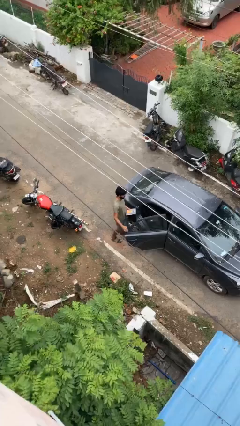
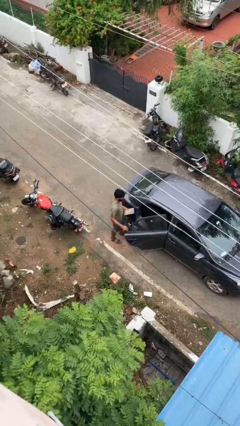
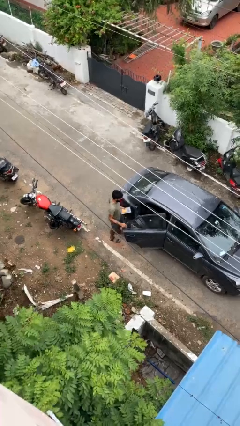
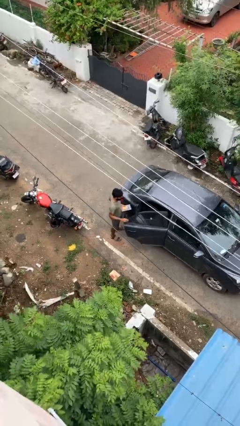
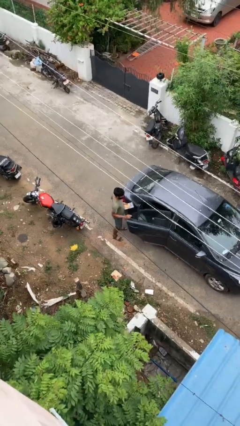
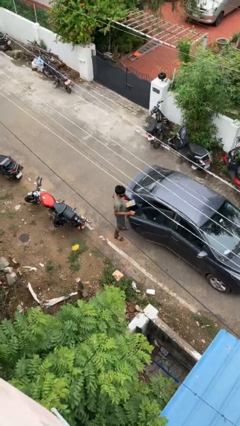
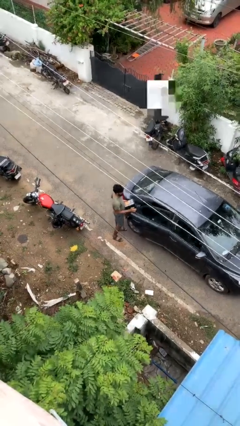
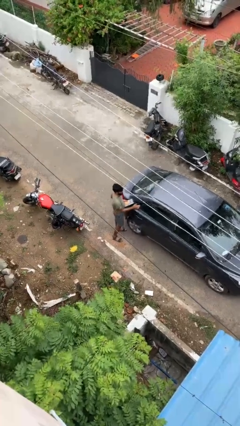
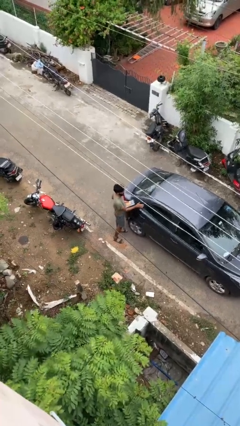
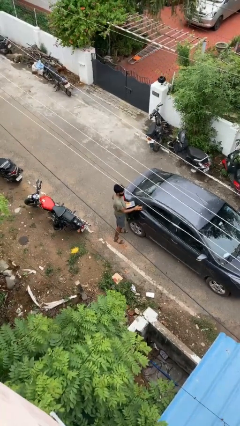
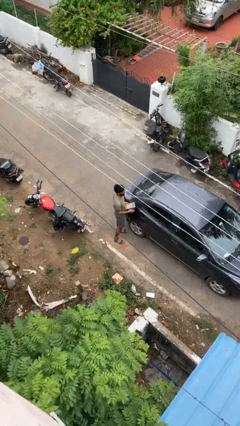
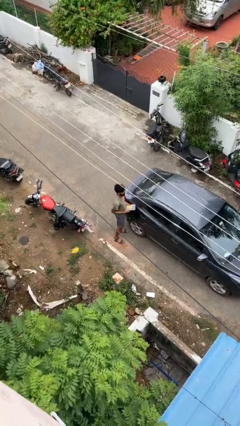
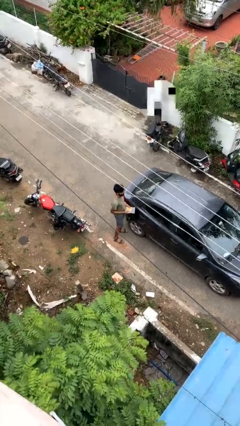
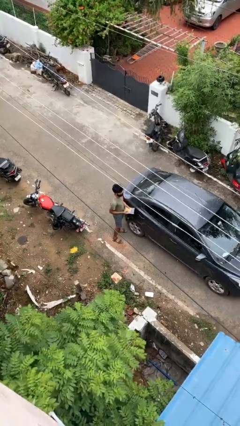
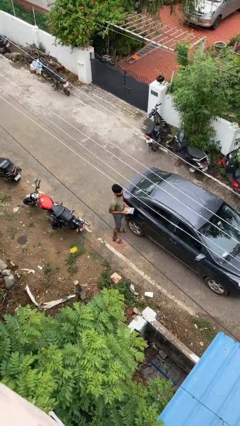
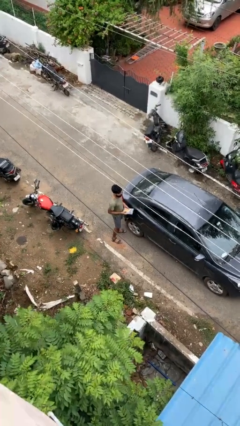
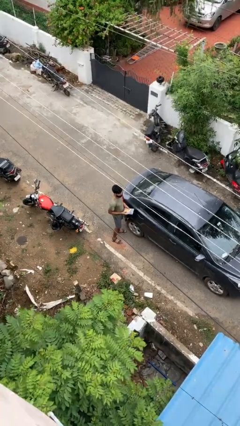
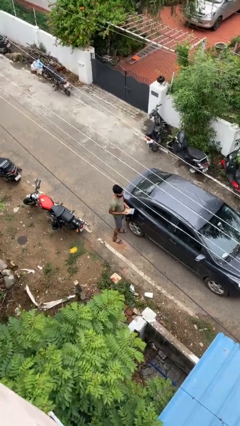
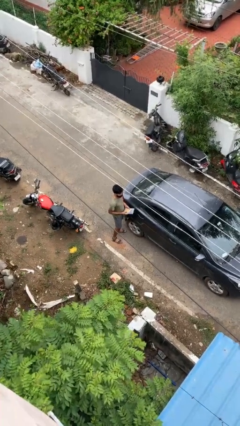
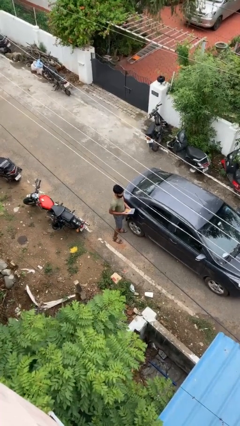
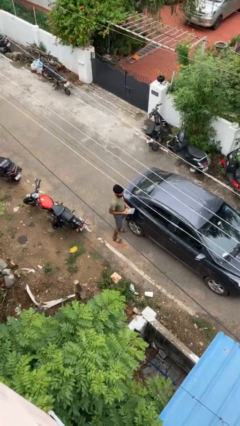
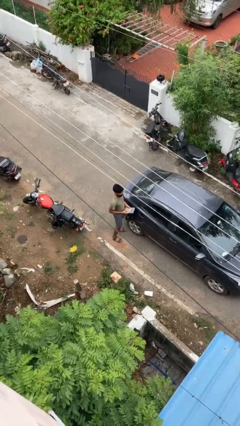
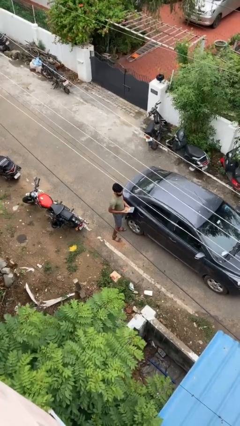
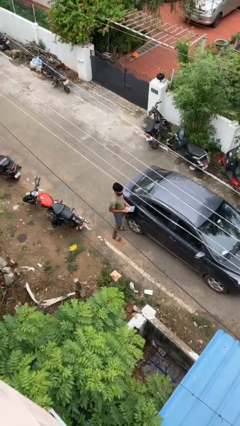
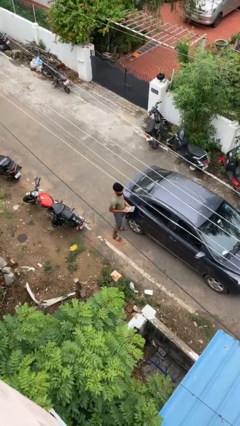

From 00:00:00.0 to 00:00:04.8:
person closes car door

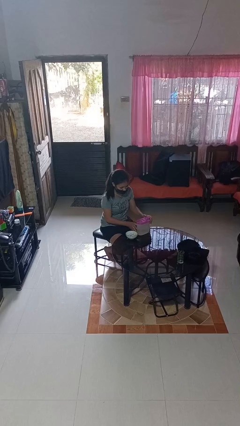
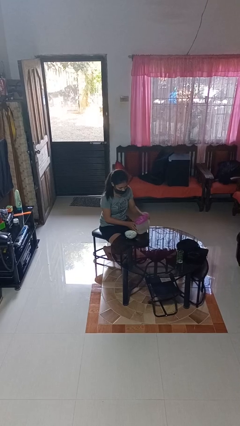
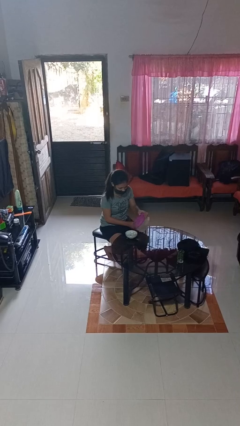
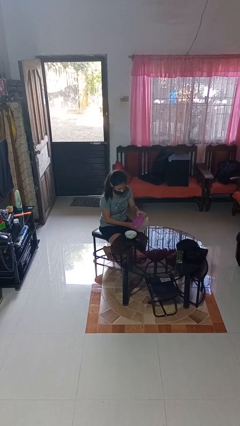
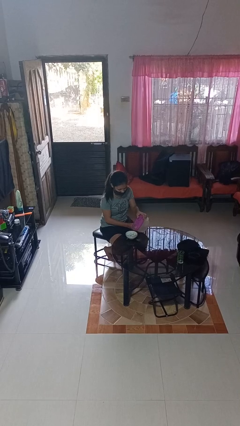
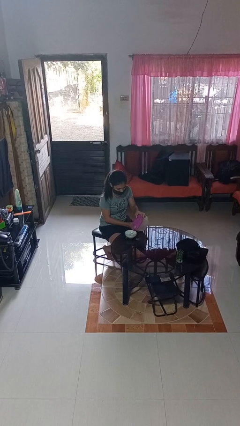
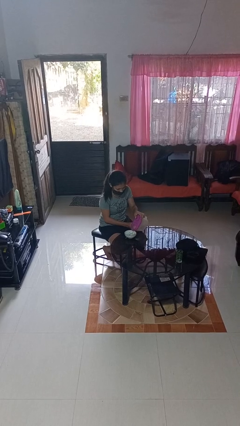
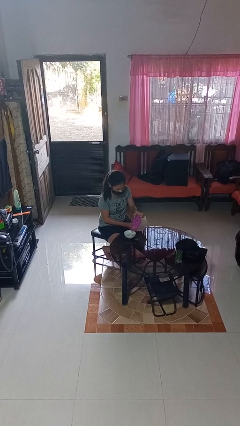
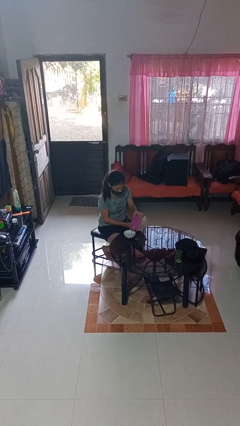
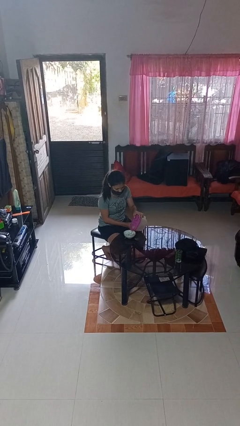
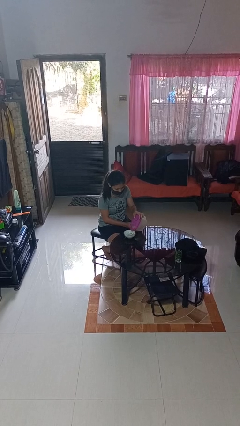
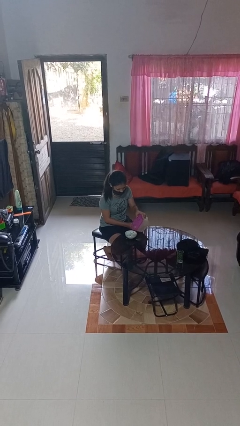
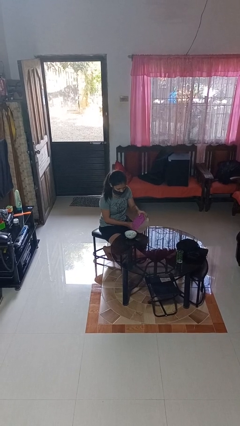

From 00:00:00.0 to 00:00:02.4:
person pours into bowl

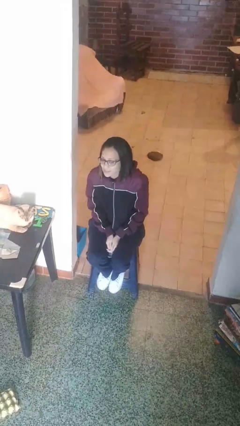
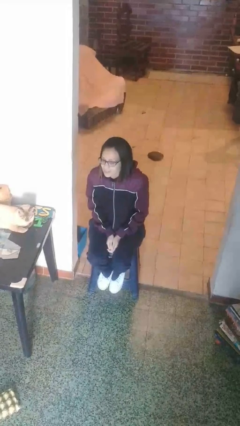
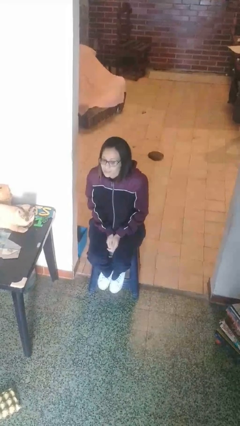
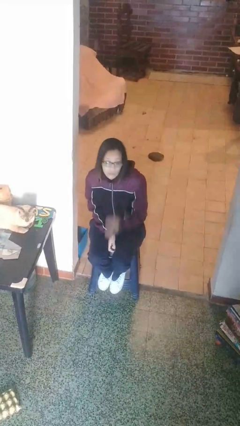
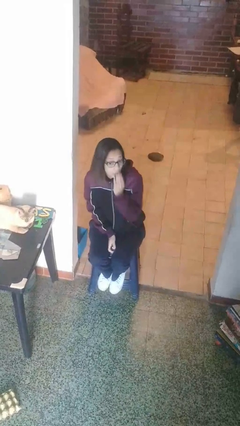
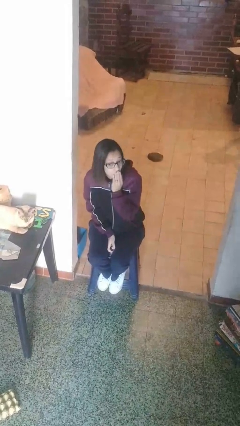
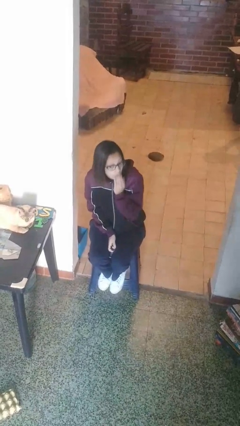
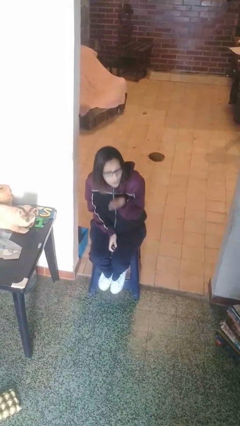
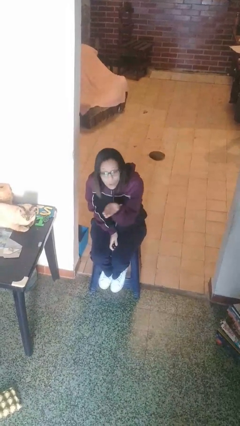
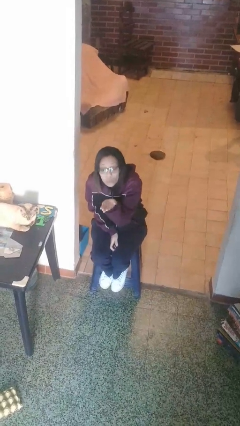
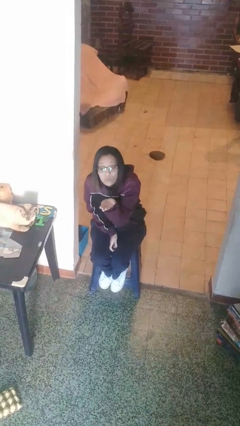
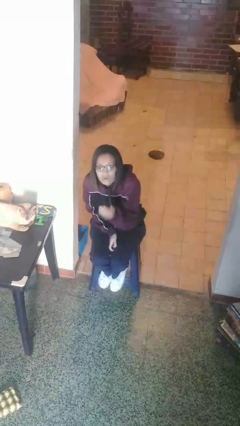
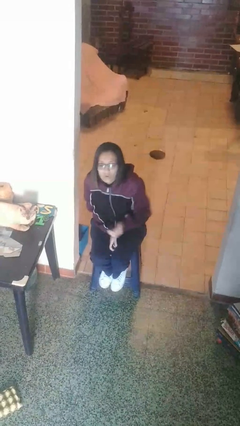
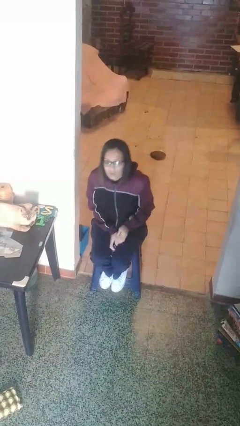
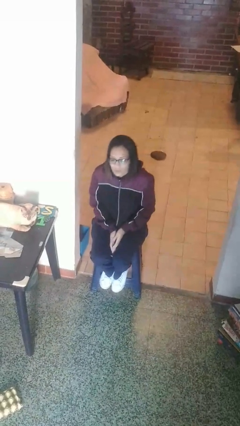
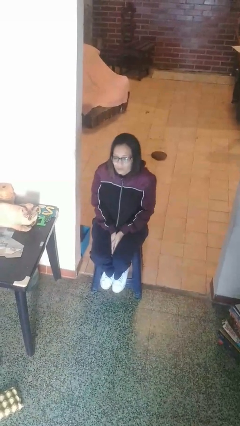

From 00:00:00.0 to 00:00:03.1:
person gestures blow kiss

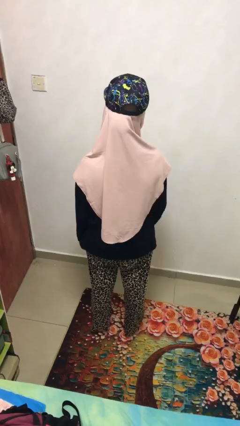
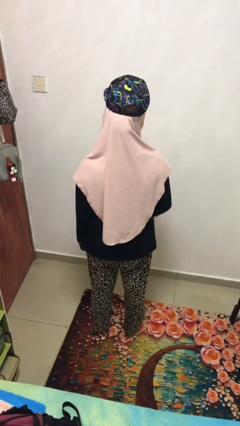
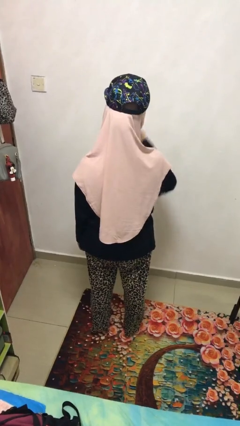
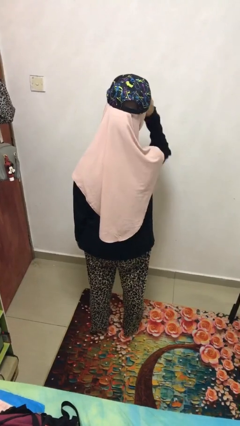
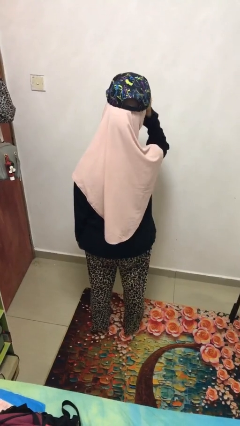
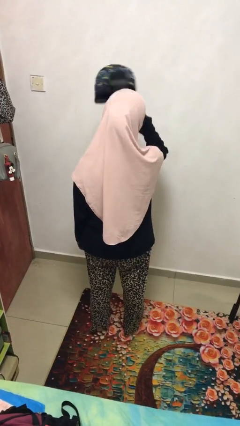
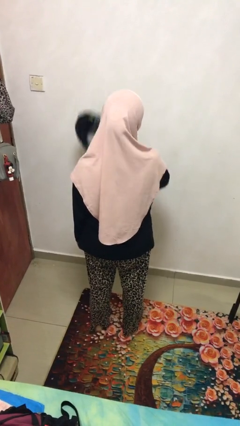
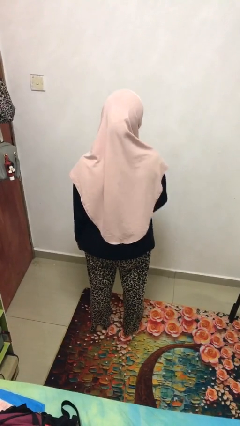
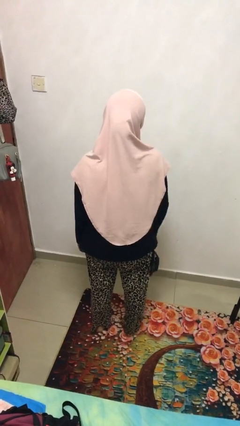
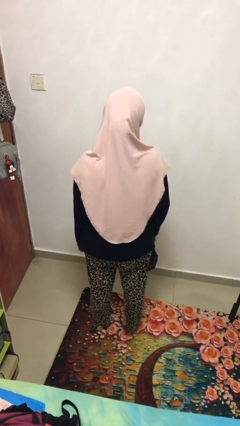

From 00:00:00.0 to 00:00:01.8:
person takes off hat

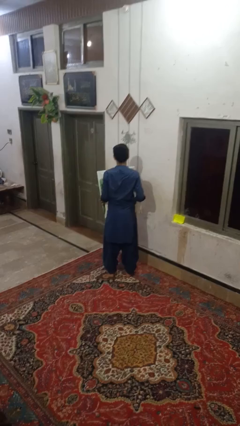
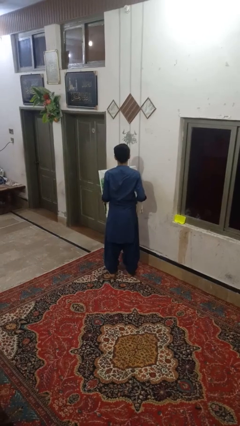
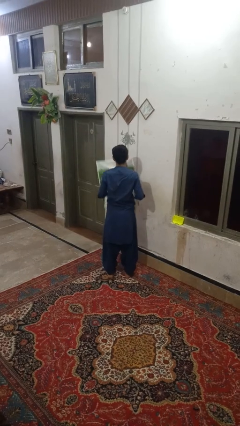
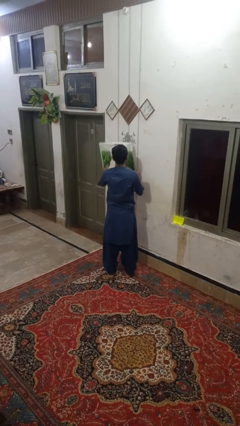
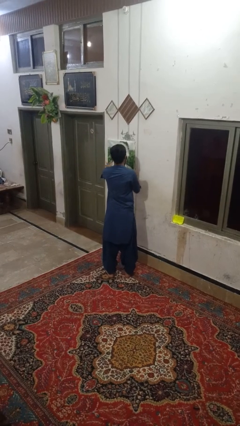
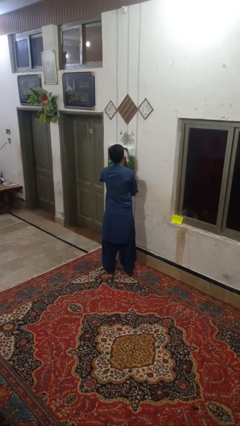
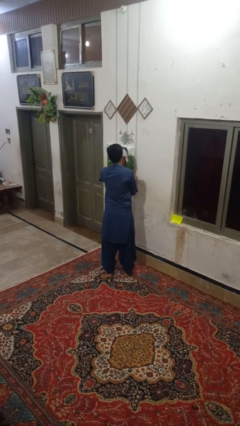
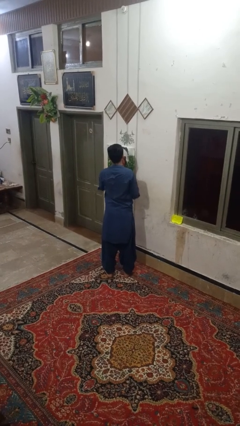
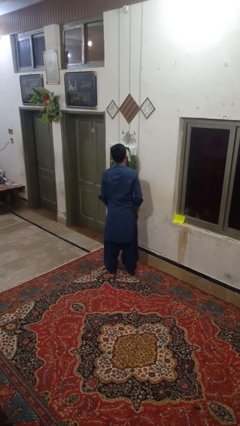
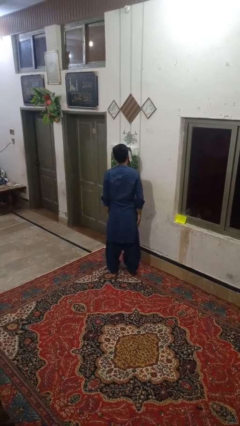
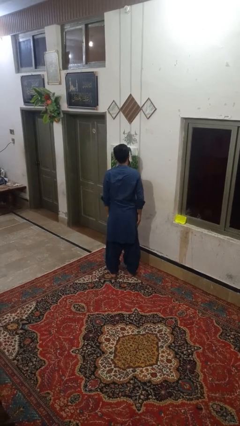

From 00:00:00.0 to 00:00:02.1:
person puts up picture frame

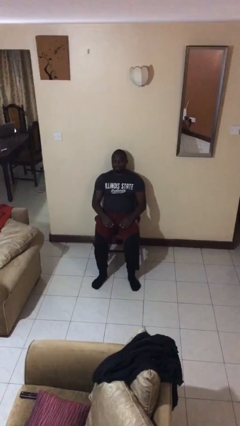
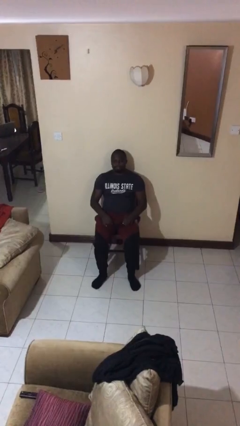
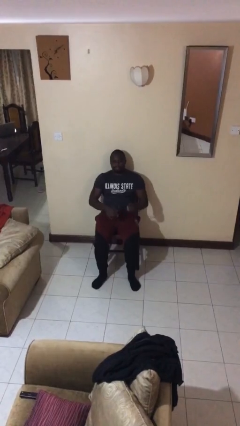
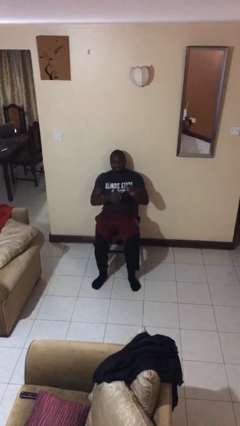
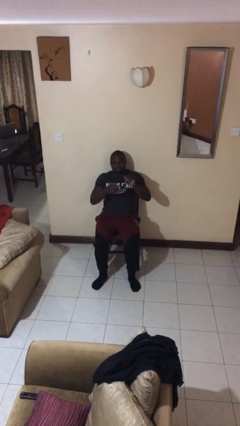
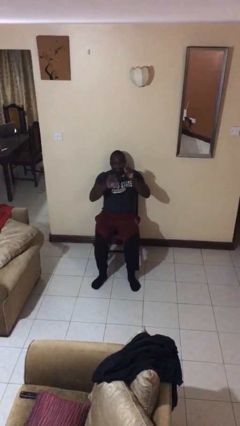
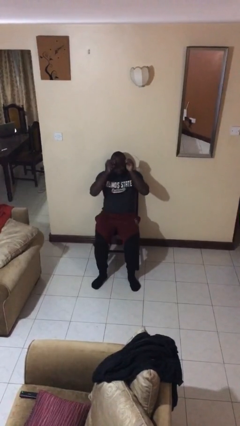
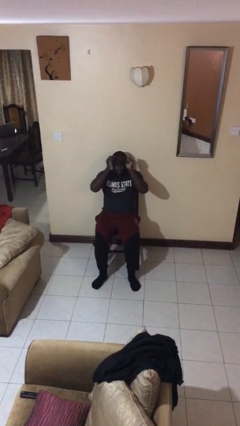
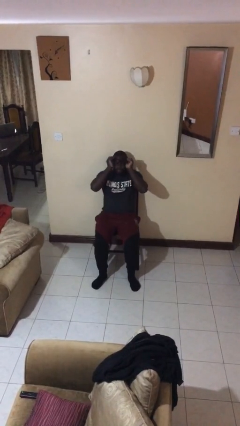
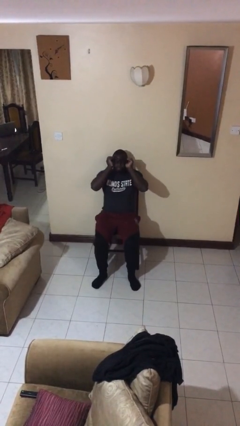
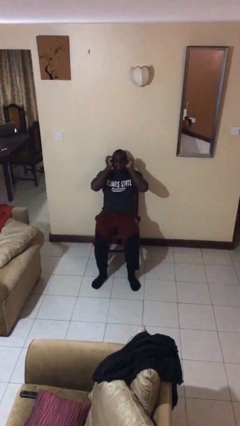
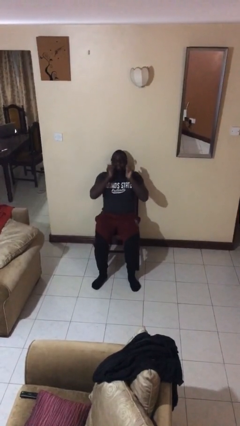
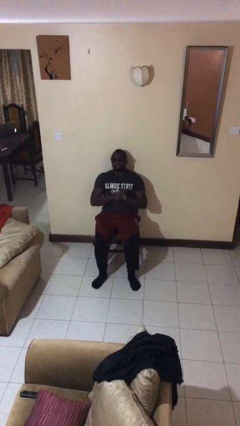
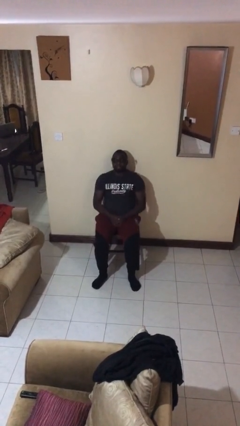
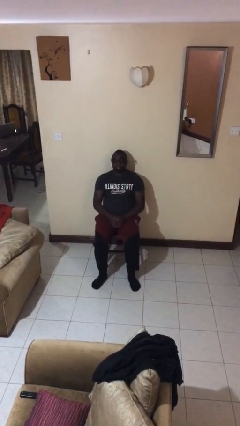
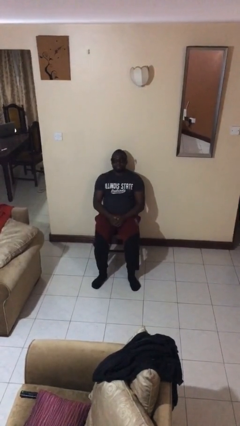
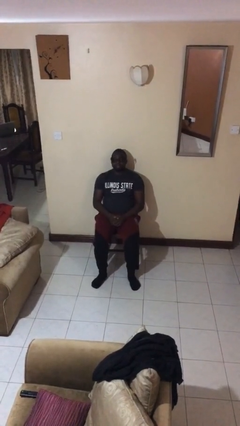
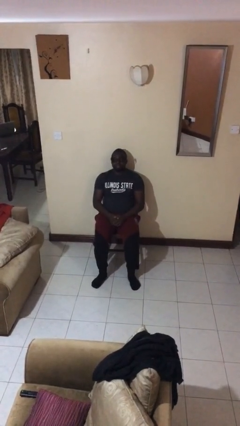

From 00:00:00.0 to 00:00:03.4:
person puts on glasses
